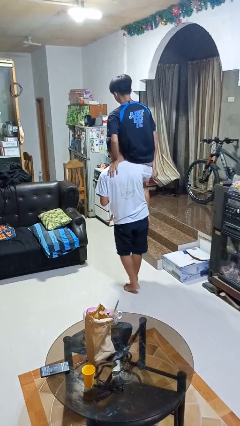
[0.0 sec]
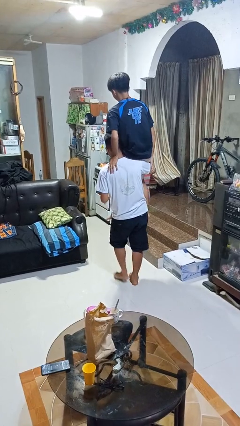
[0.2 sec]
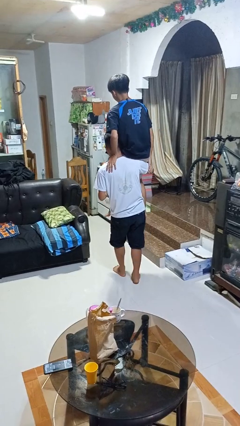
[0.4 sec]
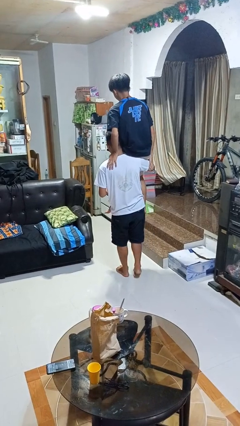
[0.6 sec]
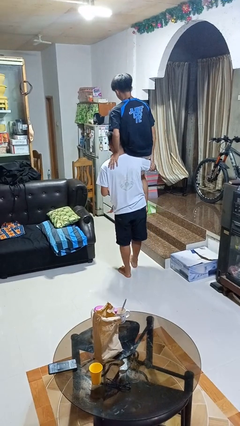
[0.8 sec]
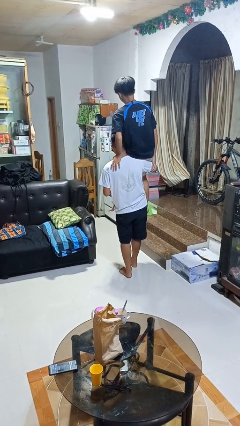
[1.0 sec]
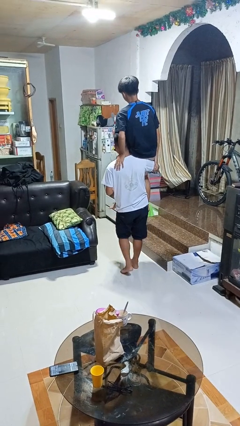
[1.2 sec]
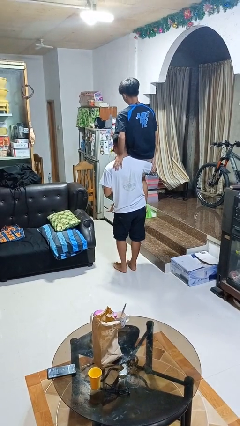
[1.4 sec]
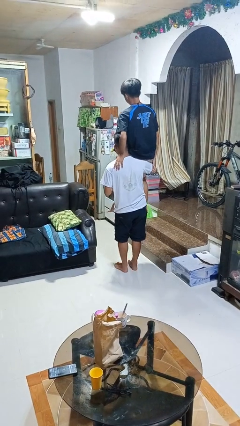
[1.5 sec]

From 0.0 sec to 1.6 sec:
person carries person on shoulders

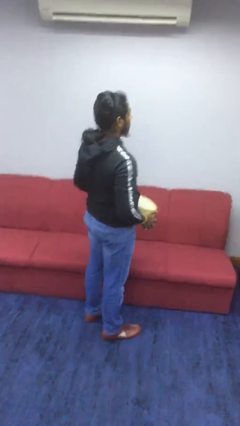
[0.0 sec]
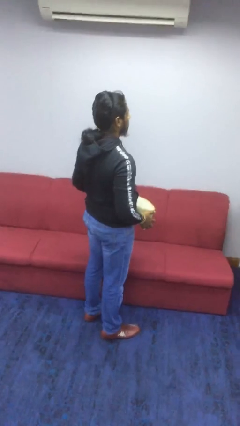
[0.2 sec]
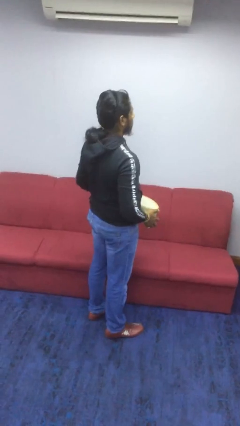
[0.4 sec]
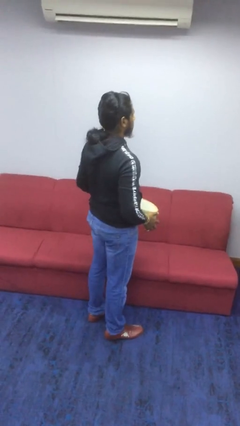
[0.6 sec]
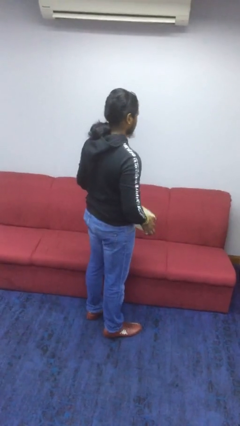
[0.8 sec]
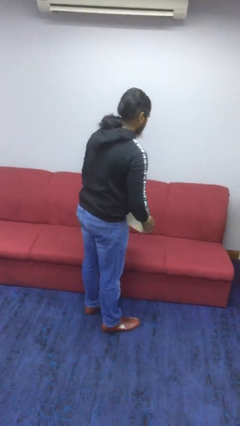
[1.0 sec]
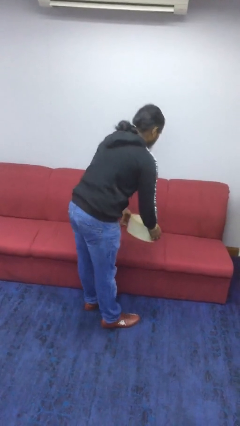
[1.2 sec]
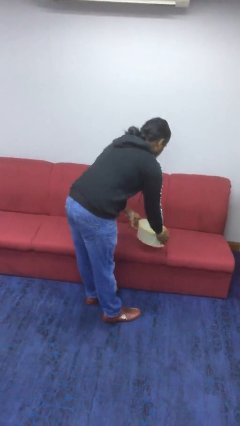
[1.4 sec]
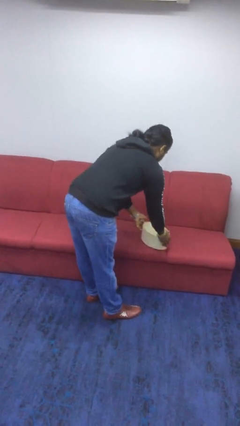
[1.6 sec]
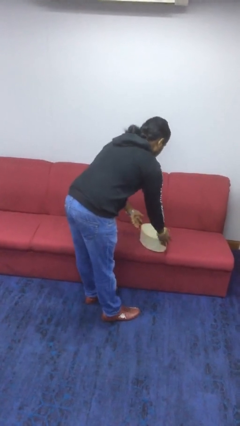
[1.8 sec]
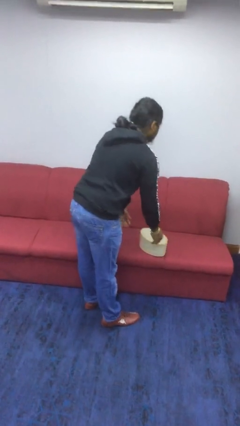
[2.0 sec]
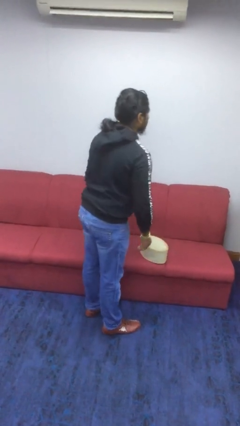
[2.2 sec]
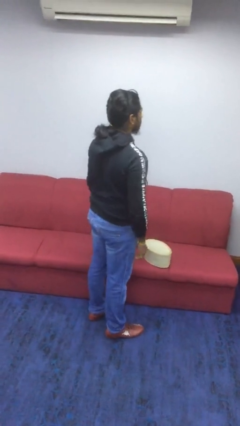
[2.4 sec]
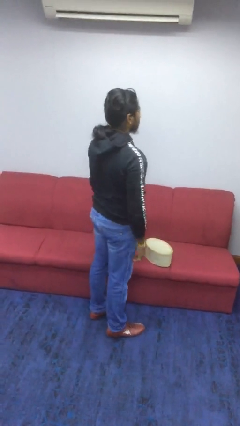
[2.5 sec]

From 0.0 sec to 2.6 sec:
person puts down object on couch

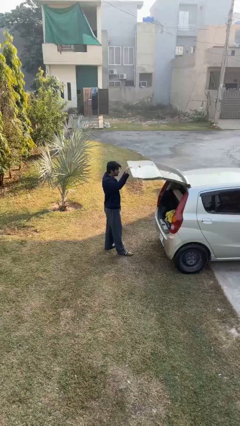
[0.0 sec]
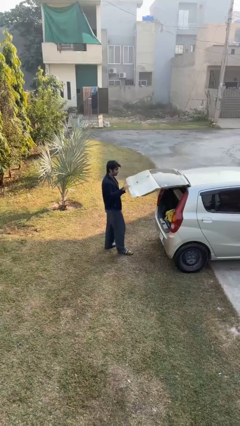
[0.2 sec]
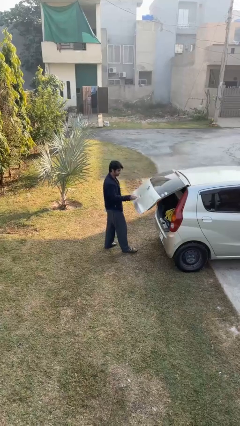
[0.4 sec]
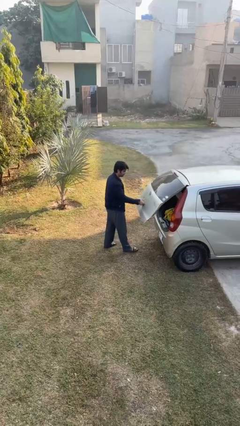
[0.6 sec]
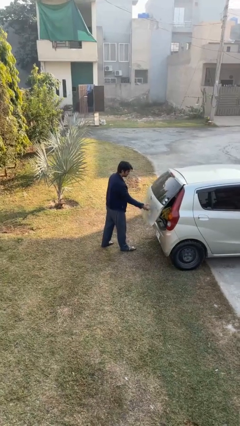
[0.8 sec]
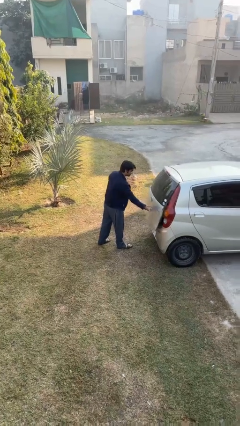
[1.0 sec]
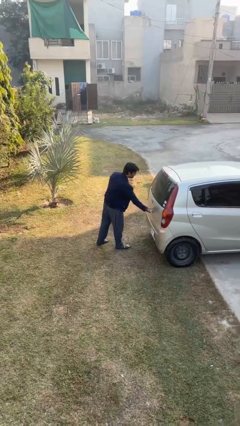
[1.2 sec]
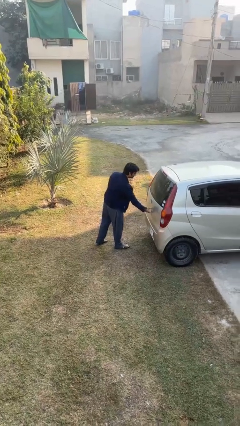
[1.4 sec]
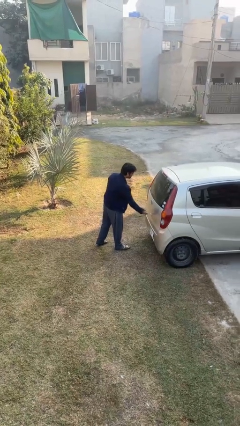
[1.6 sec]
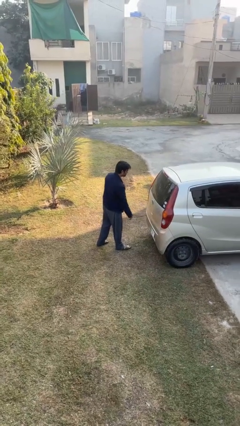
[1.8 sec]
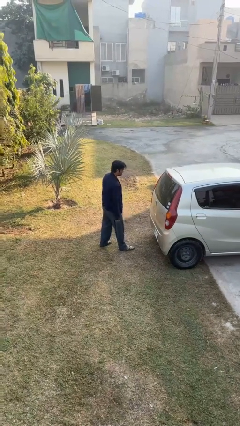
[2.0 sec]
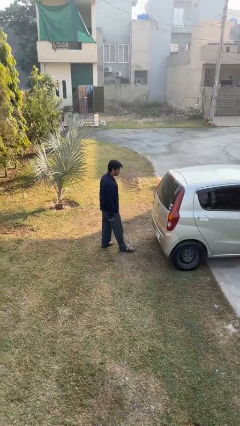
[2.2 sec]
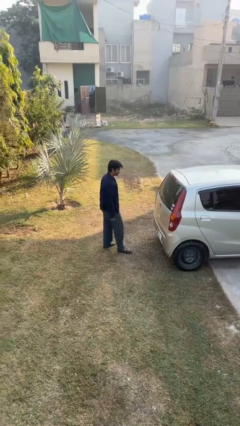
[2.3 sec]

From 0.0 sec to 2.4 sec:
person closes car trunk

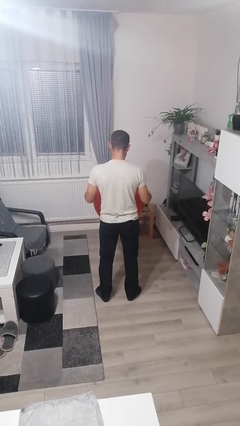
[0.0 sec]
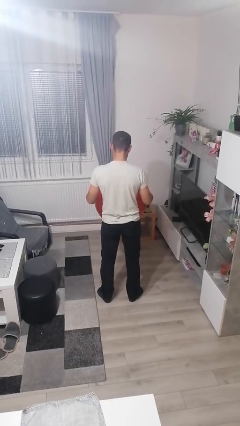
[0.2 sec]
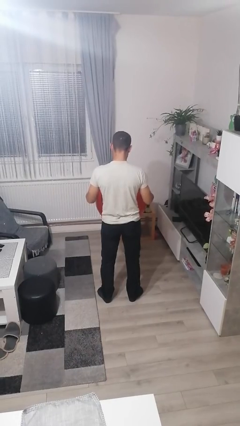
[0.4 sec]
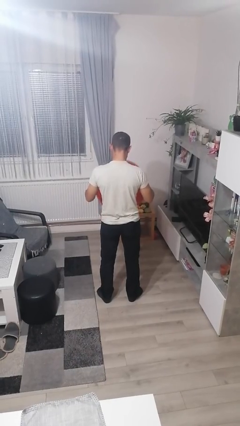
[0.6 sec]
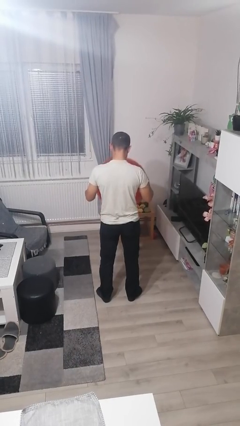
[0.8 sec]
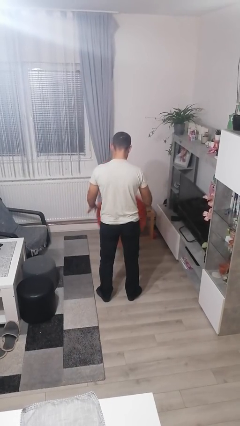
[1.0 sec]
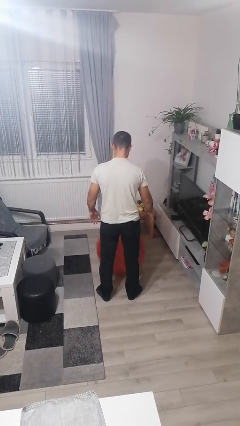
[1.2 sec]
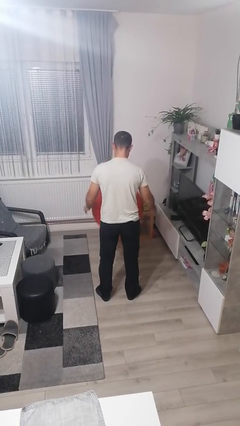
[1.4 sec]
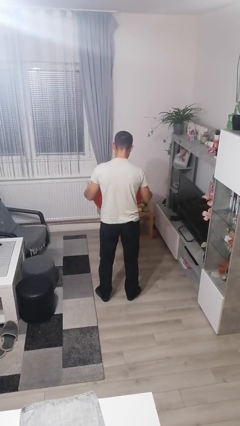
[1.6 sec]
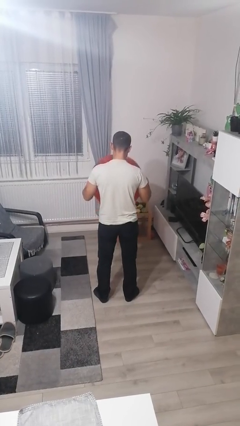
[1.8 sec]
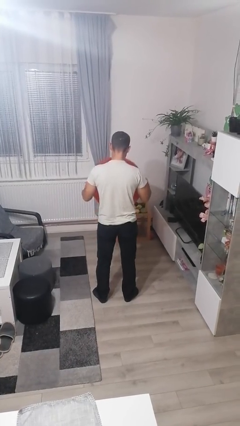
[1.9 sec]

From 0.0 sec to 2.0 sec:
person bounces ball on floor

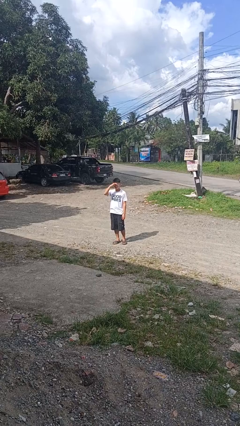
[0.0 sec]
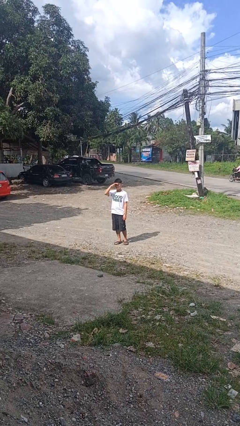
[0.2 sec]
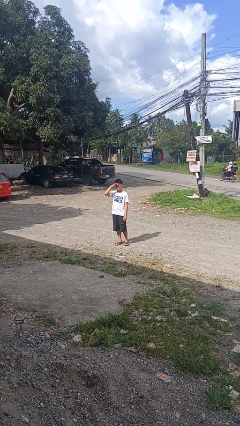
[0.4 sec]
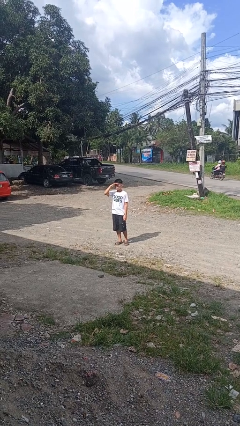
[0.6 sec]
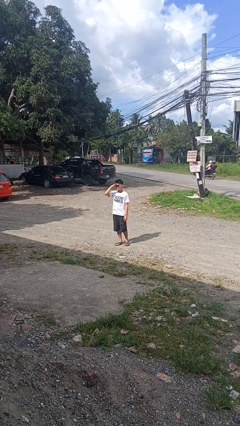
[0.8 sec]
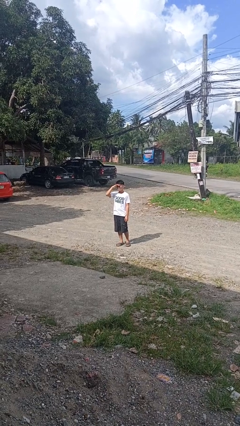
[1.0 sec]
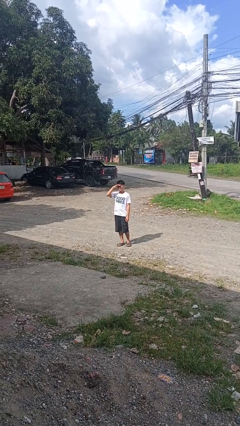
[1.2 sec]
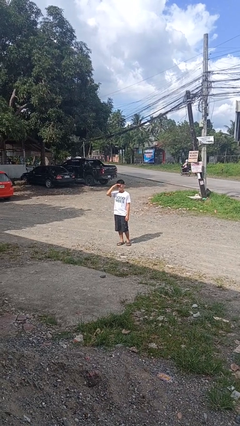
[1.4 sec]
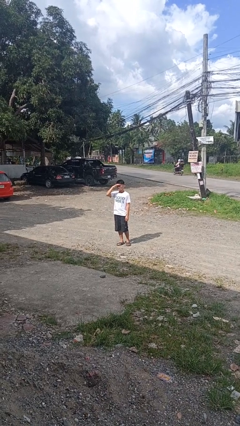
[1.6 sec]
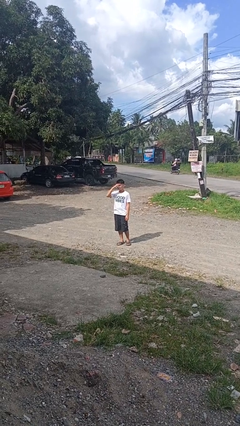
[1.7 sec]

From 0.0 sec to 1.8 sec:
person shades eyes

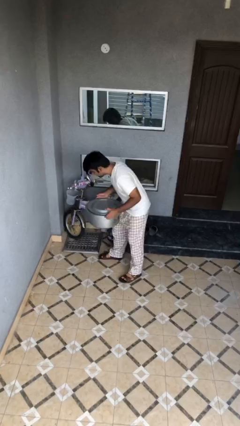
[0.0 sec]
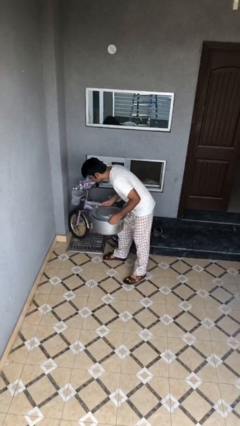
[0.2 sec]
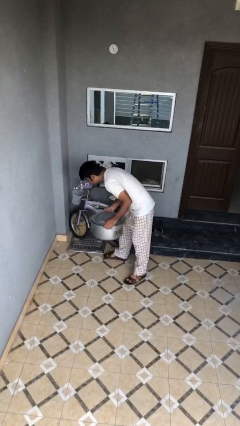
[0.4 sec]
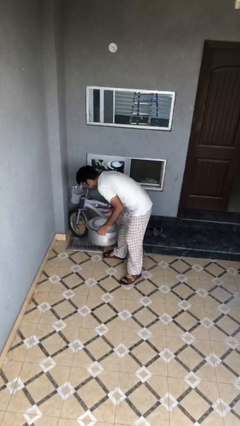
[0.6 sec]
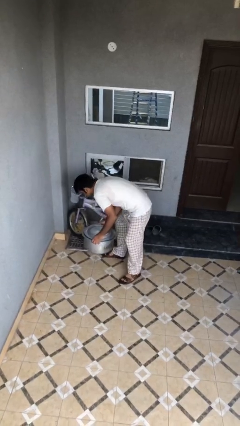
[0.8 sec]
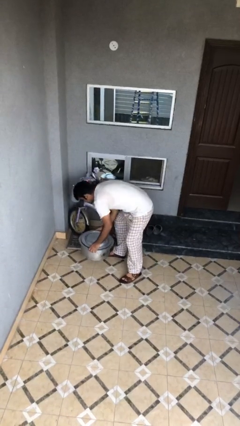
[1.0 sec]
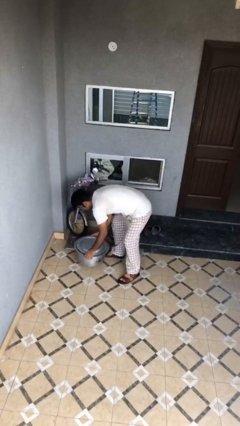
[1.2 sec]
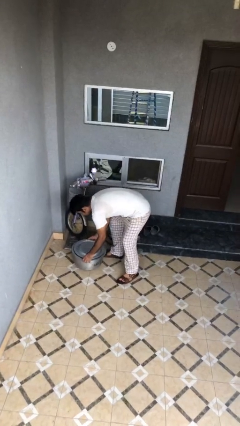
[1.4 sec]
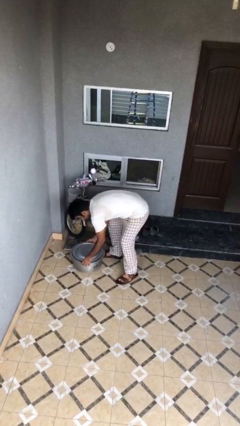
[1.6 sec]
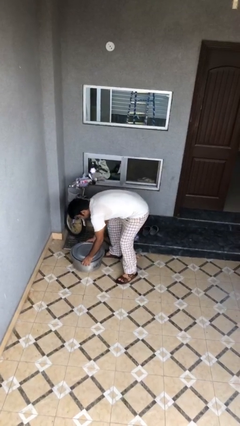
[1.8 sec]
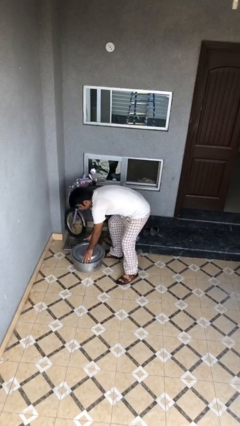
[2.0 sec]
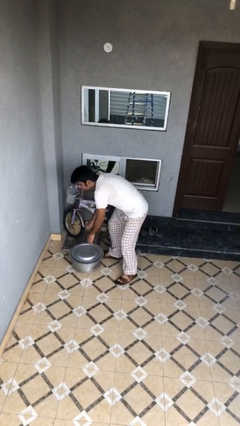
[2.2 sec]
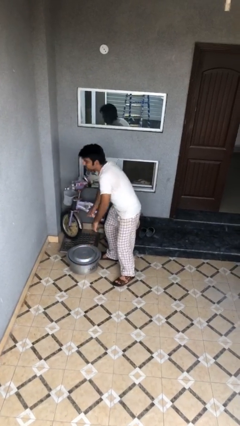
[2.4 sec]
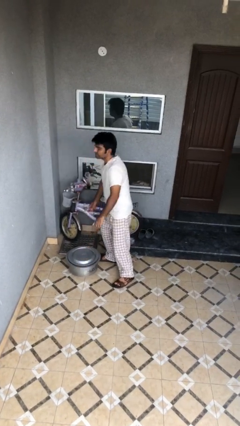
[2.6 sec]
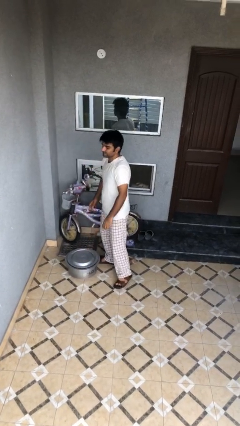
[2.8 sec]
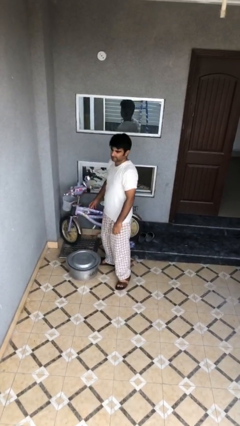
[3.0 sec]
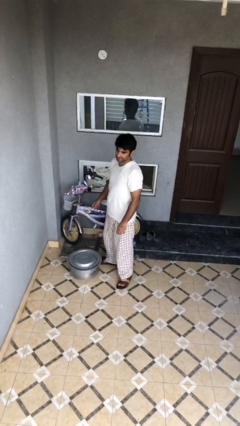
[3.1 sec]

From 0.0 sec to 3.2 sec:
person puts down object on floor

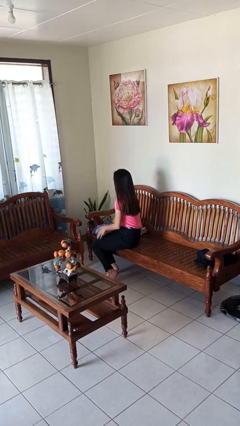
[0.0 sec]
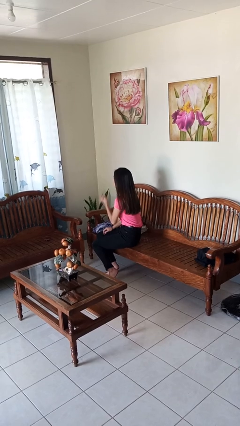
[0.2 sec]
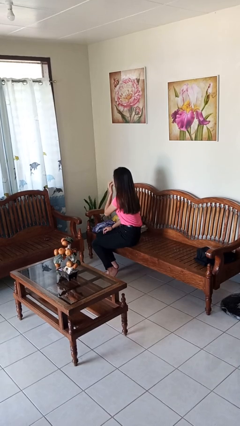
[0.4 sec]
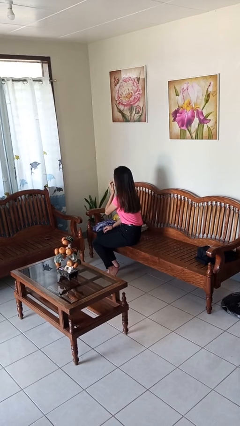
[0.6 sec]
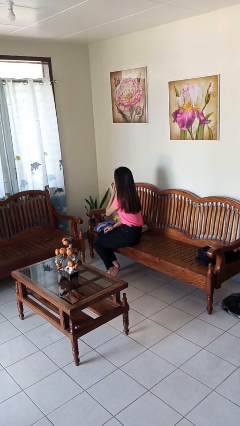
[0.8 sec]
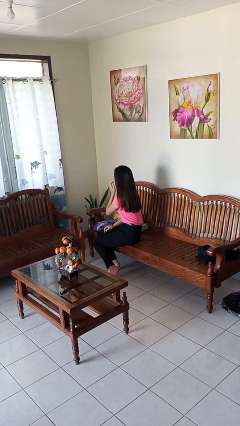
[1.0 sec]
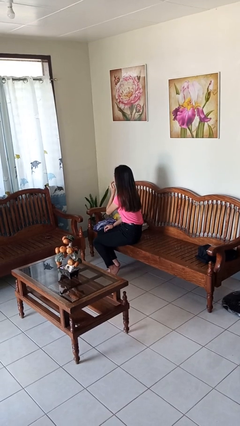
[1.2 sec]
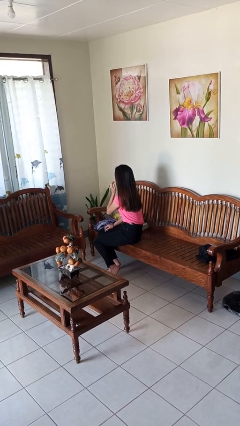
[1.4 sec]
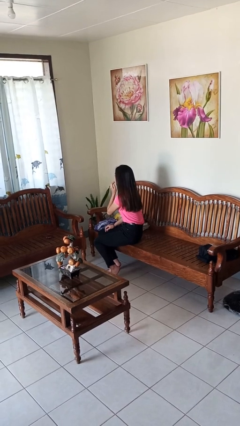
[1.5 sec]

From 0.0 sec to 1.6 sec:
person licks fingers

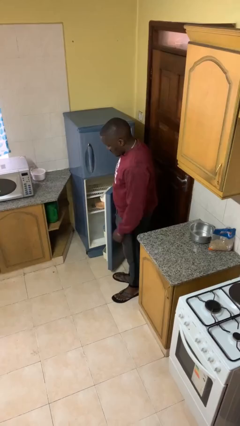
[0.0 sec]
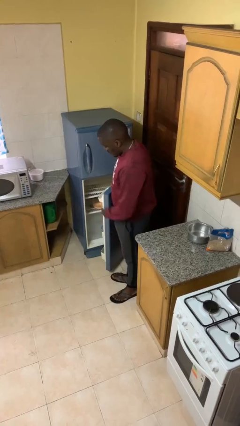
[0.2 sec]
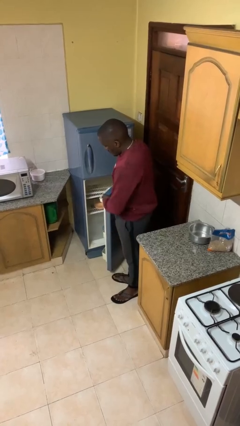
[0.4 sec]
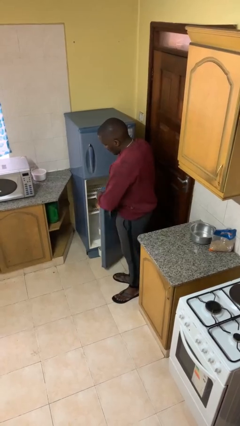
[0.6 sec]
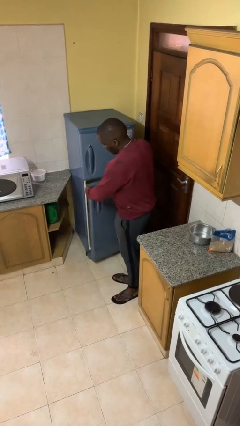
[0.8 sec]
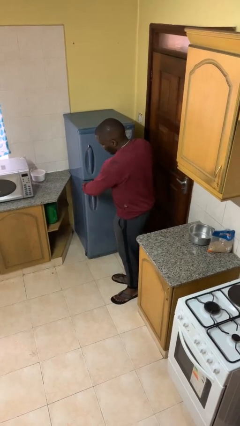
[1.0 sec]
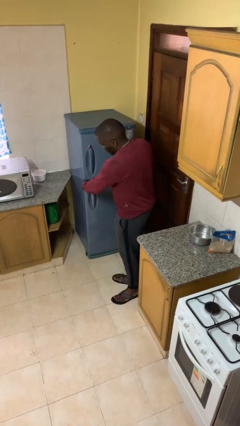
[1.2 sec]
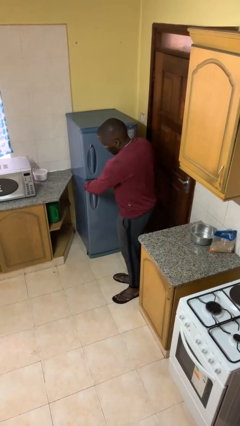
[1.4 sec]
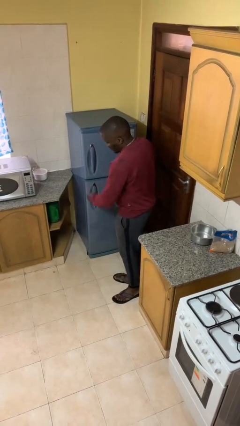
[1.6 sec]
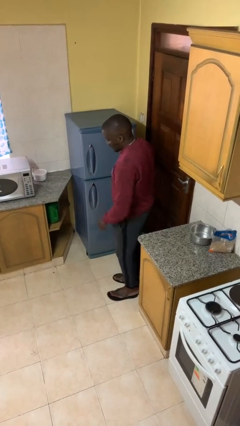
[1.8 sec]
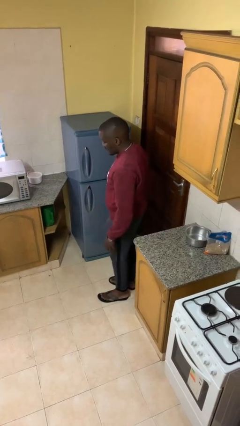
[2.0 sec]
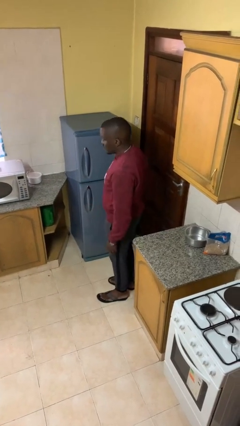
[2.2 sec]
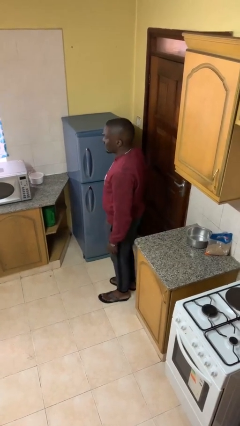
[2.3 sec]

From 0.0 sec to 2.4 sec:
person closes refrigerator
